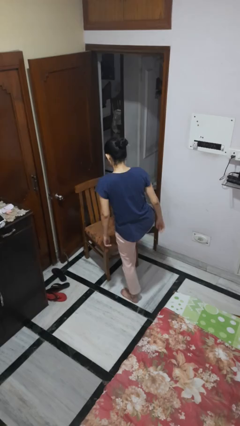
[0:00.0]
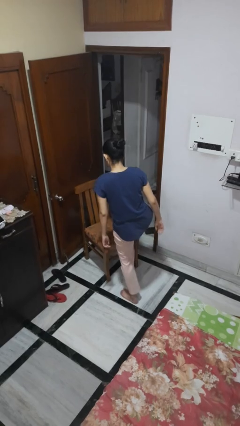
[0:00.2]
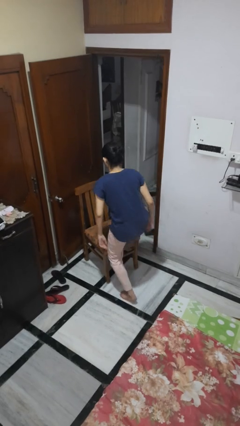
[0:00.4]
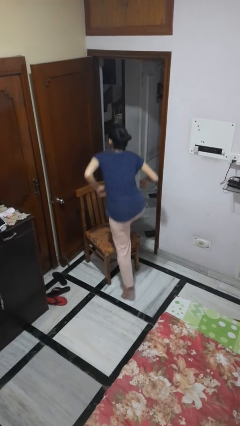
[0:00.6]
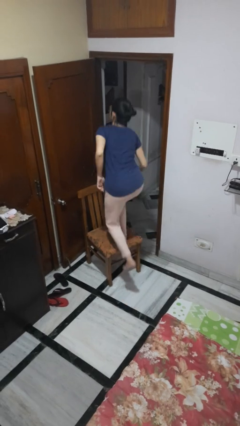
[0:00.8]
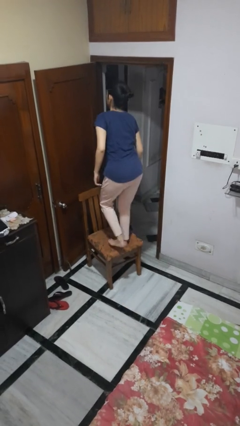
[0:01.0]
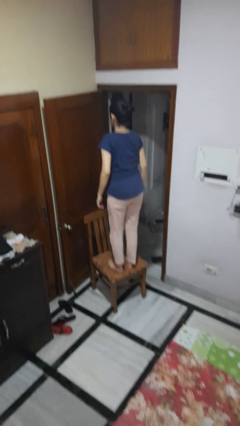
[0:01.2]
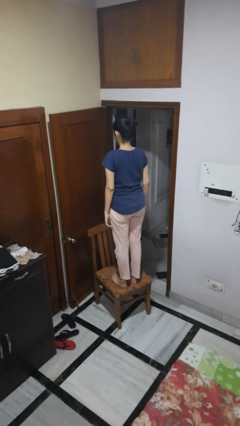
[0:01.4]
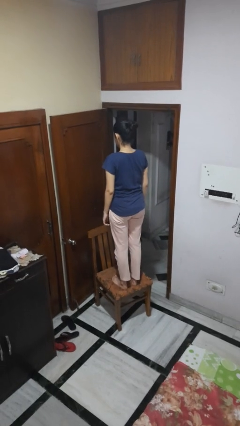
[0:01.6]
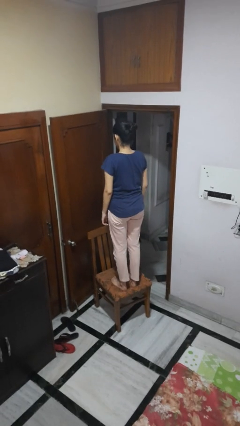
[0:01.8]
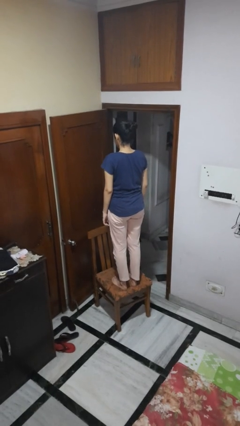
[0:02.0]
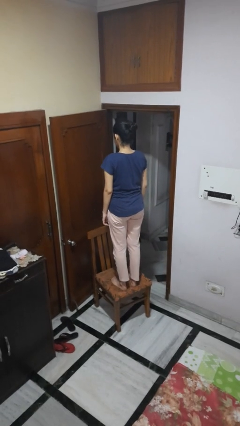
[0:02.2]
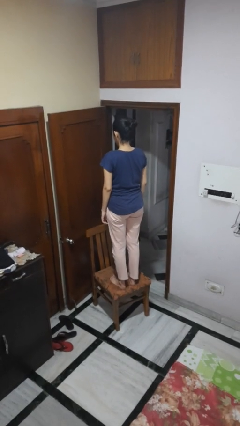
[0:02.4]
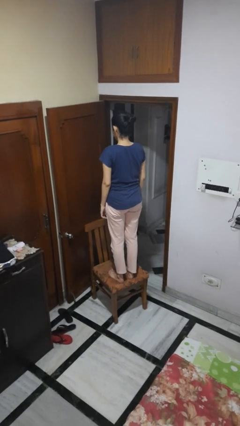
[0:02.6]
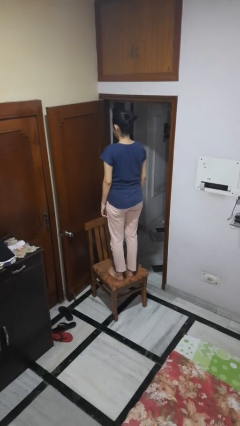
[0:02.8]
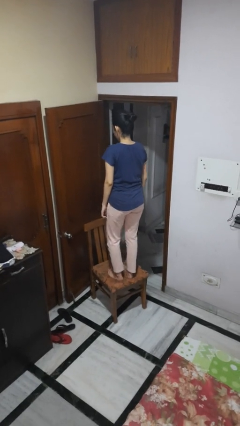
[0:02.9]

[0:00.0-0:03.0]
person climbs on chair

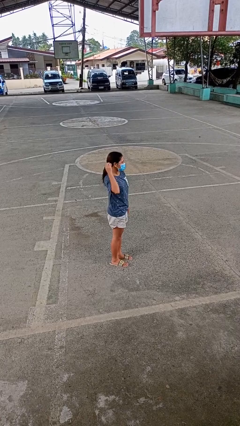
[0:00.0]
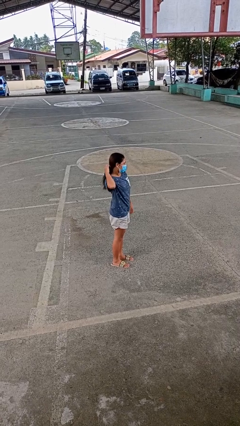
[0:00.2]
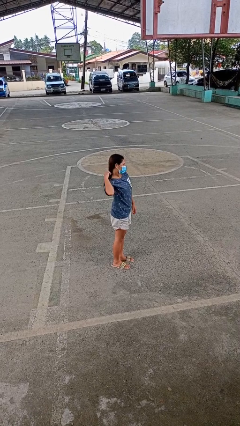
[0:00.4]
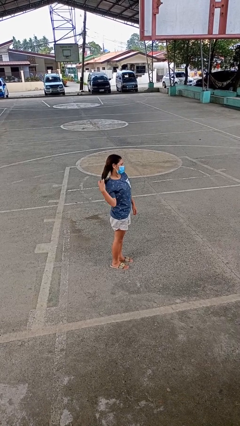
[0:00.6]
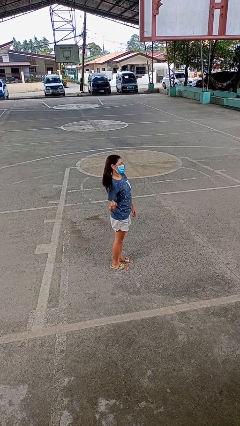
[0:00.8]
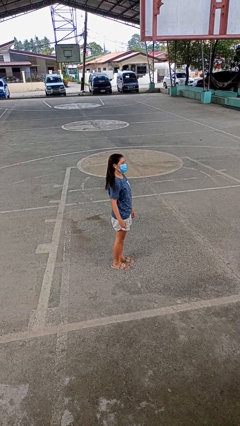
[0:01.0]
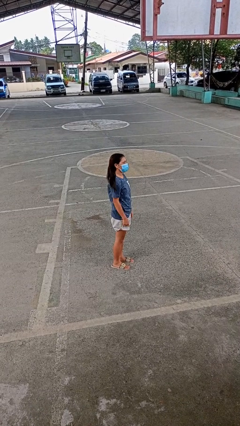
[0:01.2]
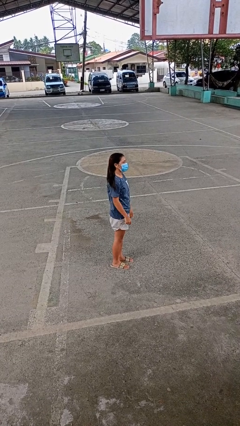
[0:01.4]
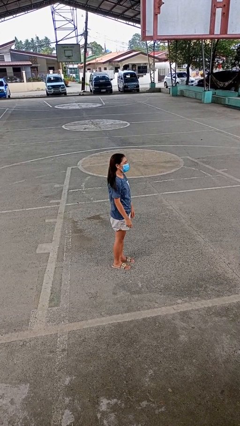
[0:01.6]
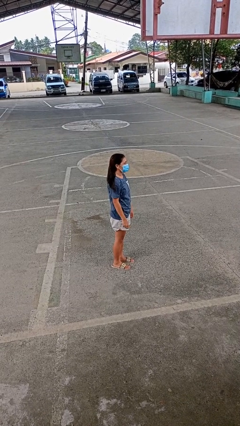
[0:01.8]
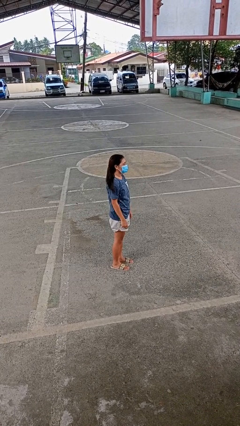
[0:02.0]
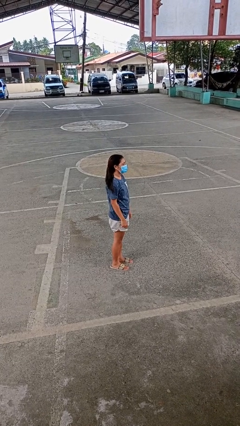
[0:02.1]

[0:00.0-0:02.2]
person takes off hairtie

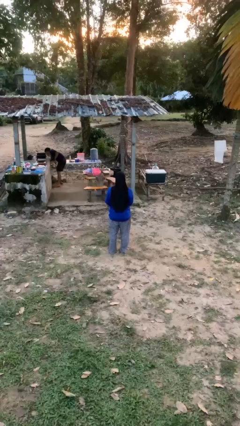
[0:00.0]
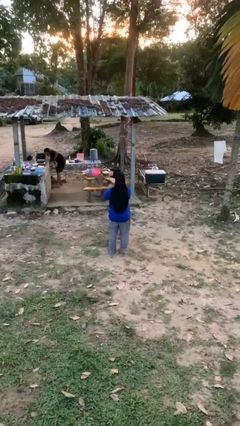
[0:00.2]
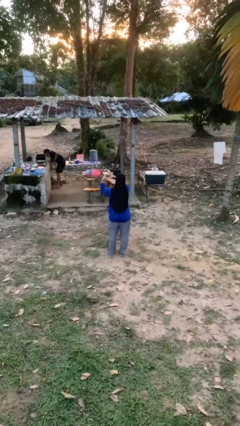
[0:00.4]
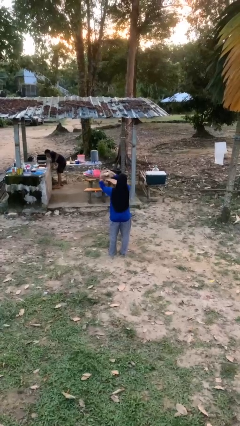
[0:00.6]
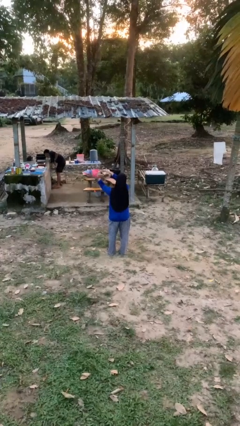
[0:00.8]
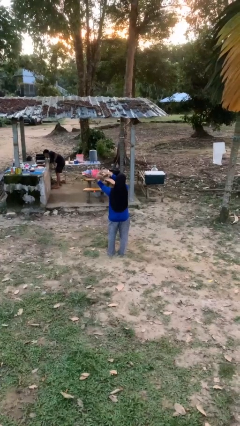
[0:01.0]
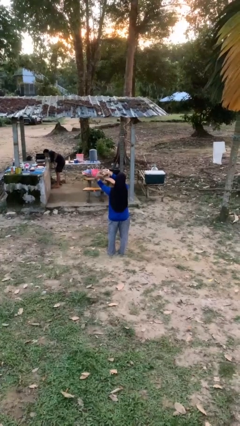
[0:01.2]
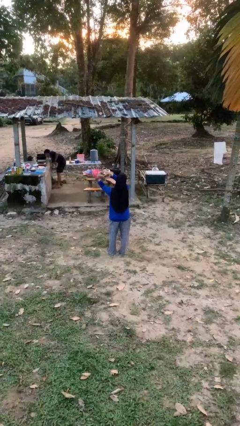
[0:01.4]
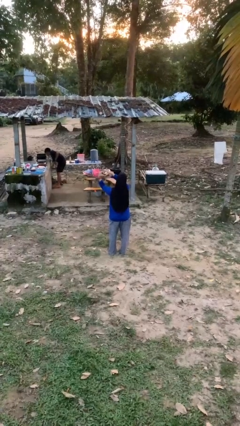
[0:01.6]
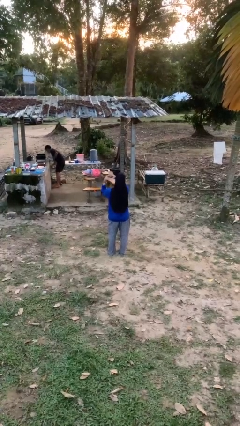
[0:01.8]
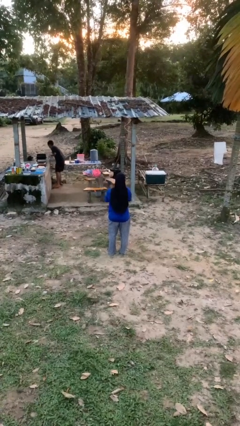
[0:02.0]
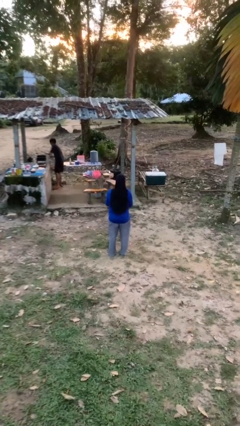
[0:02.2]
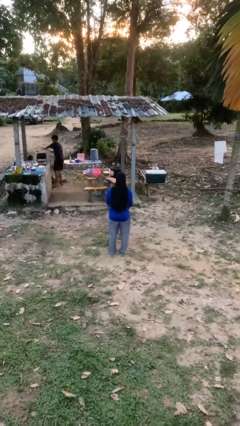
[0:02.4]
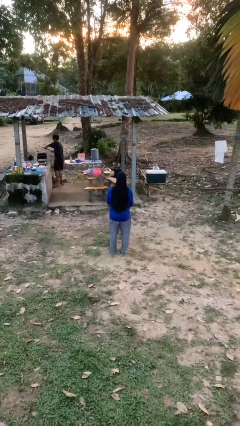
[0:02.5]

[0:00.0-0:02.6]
person gestures heart

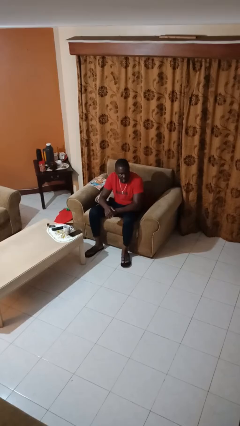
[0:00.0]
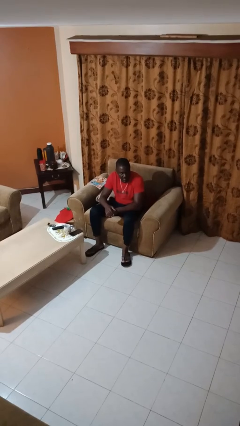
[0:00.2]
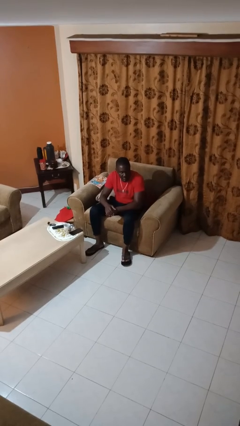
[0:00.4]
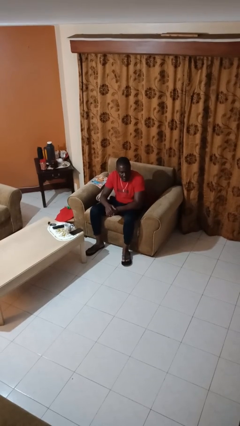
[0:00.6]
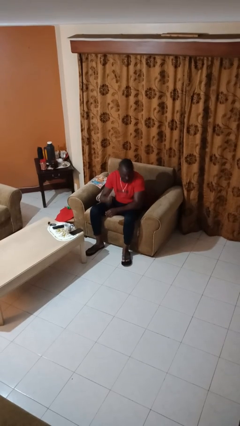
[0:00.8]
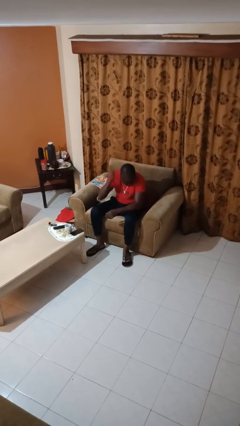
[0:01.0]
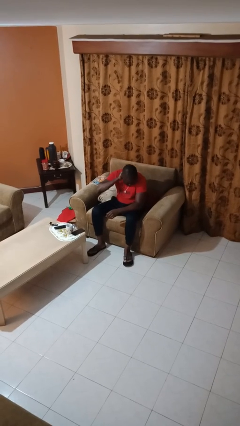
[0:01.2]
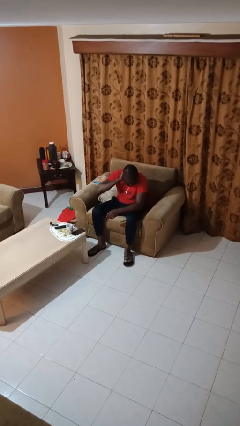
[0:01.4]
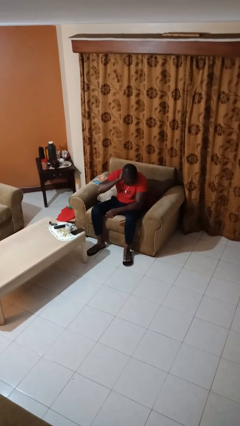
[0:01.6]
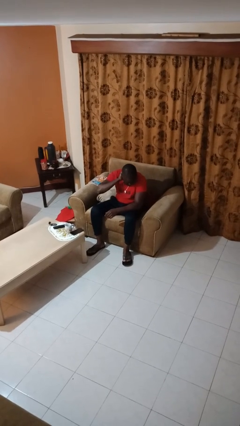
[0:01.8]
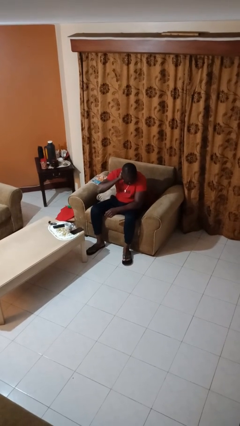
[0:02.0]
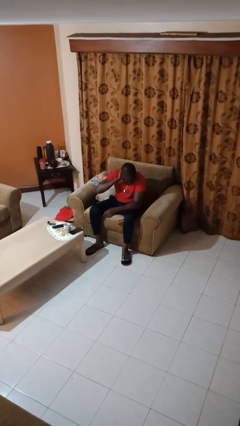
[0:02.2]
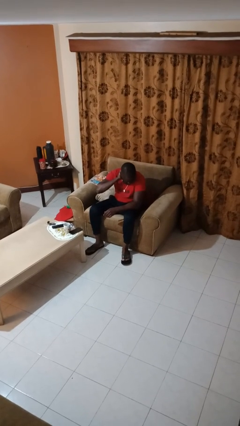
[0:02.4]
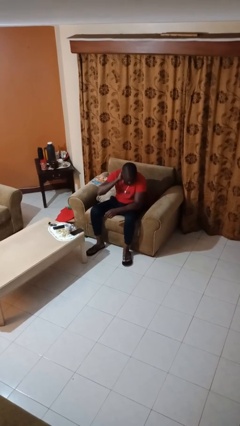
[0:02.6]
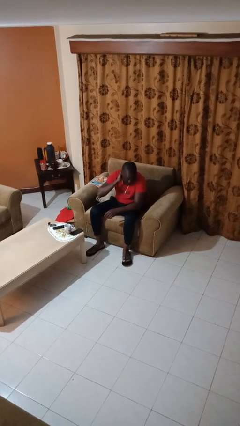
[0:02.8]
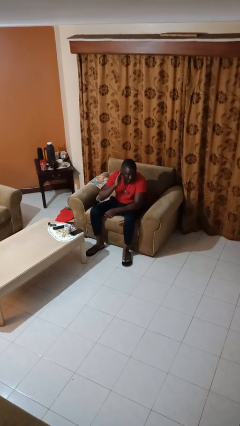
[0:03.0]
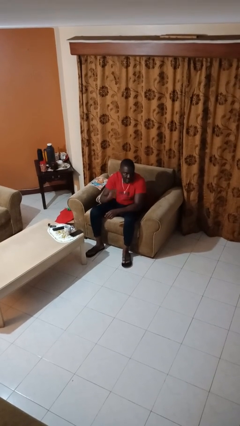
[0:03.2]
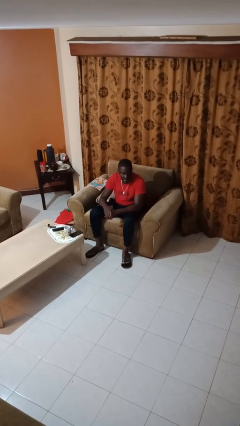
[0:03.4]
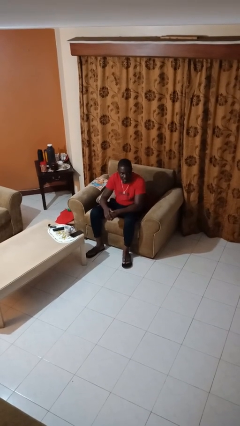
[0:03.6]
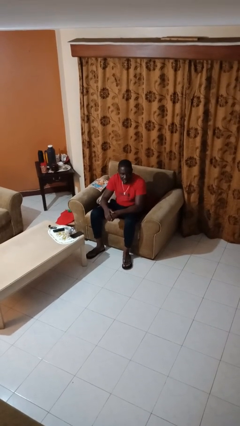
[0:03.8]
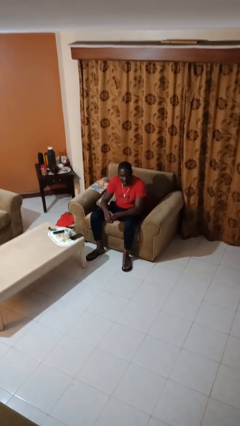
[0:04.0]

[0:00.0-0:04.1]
person swats bug

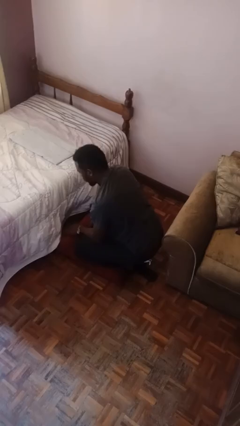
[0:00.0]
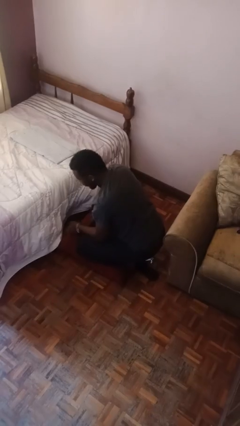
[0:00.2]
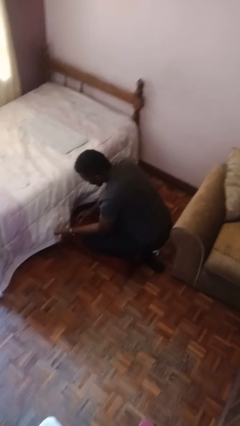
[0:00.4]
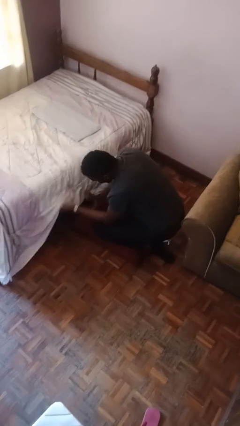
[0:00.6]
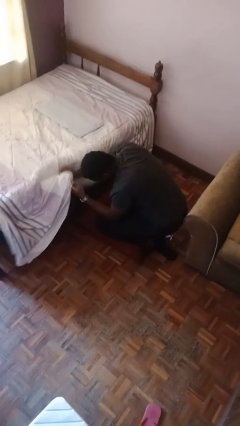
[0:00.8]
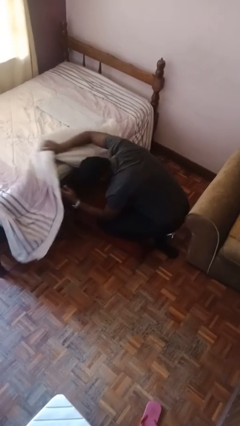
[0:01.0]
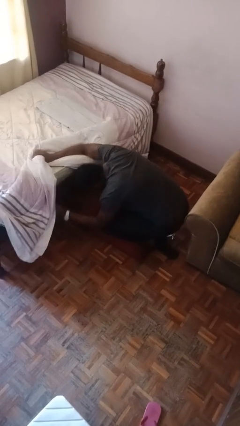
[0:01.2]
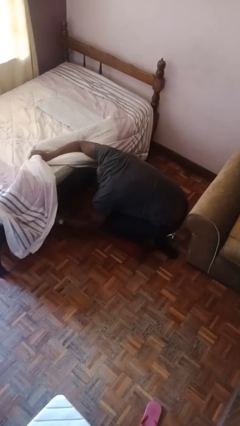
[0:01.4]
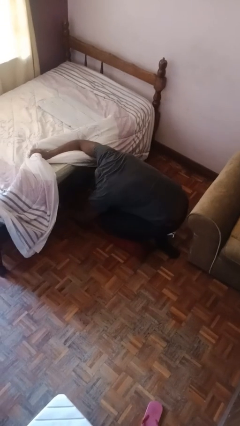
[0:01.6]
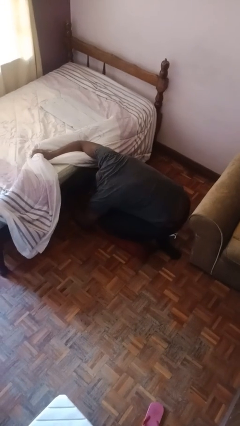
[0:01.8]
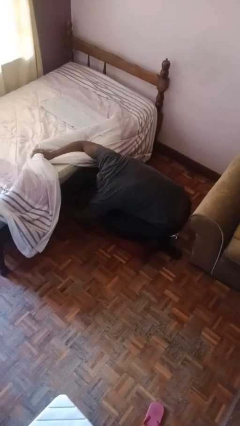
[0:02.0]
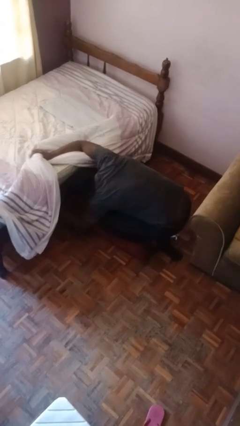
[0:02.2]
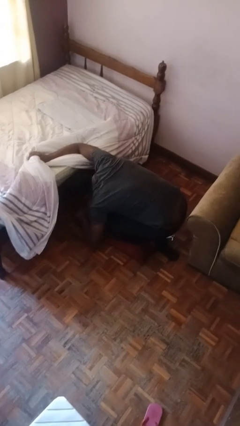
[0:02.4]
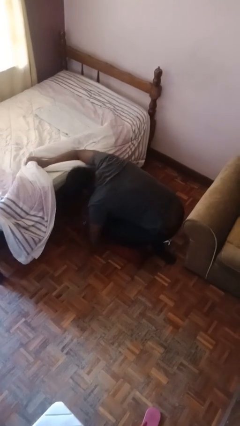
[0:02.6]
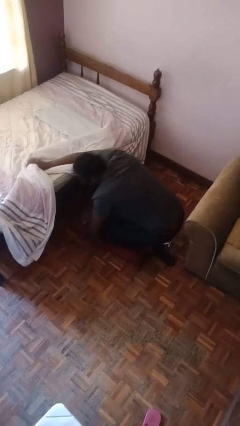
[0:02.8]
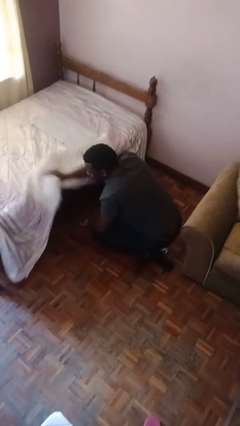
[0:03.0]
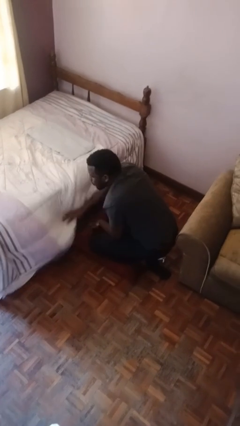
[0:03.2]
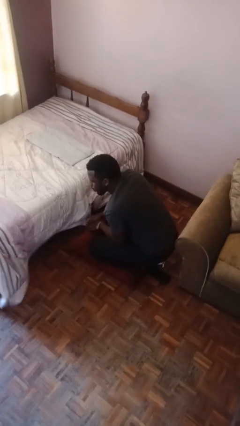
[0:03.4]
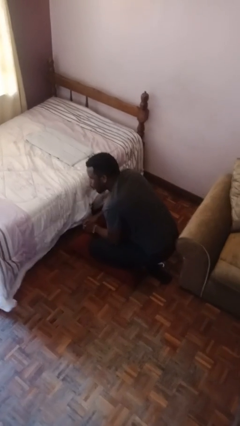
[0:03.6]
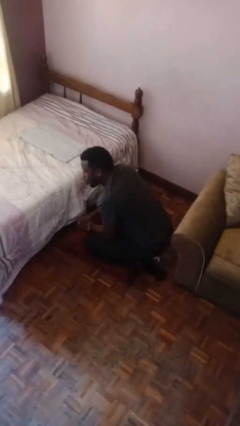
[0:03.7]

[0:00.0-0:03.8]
person searches under bed

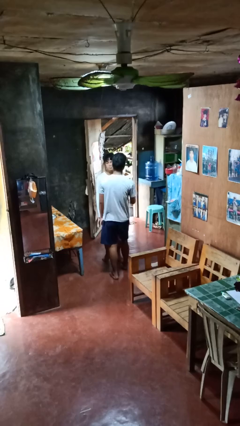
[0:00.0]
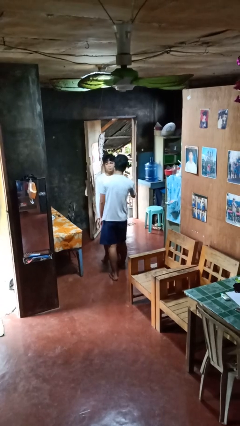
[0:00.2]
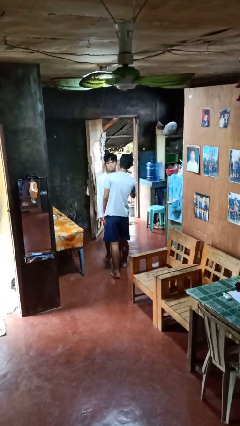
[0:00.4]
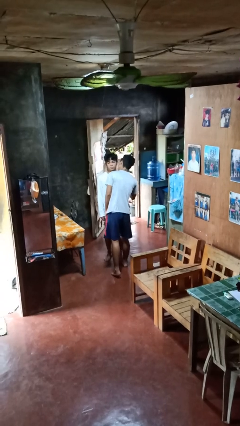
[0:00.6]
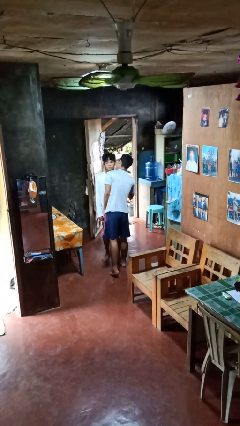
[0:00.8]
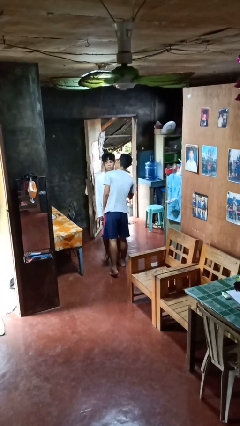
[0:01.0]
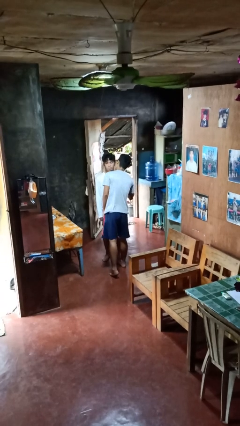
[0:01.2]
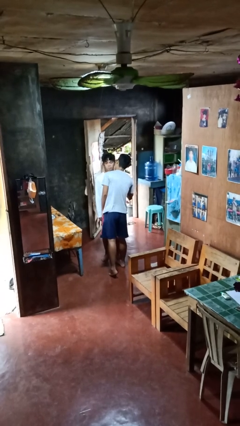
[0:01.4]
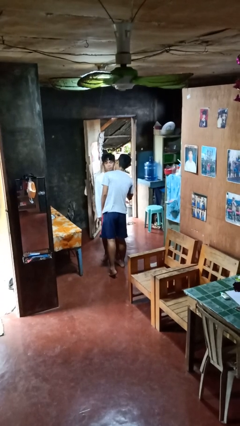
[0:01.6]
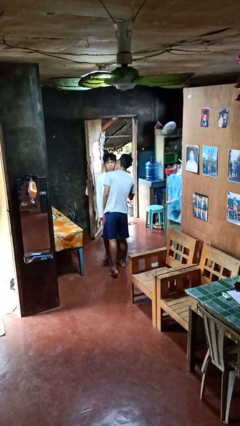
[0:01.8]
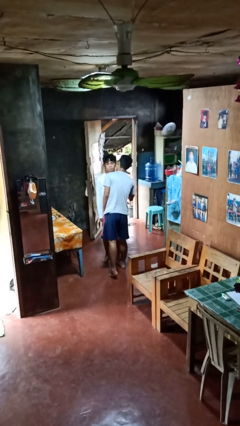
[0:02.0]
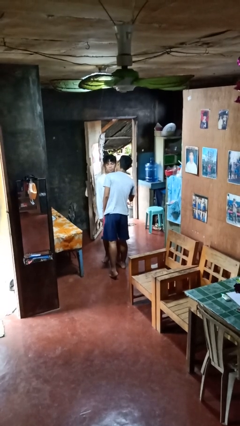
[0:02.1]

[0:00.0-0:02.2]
person kisses cheek of person
